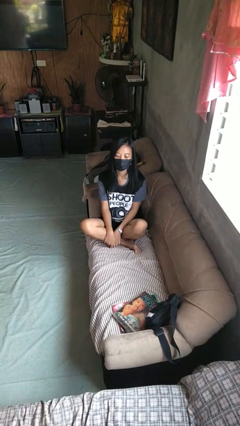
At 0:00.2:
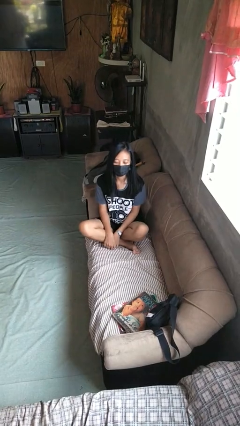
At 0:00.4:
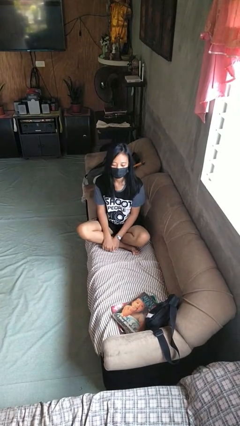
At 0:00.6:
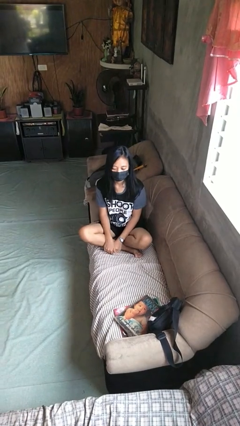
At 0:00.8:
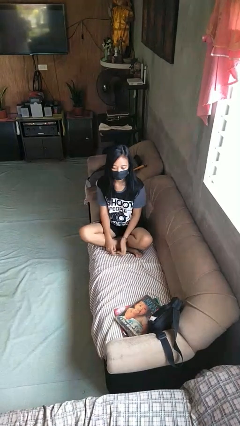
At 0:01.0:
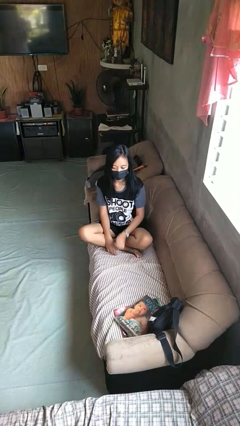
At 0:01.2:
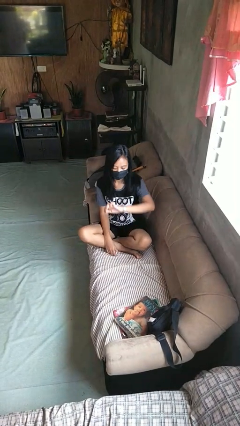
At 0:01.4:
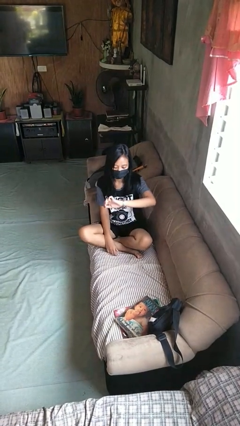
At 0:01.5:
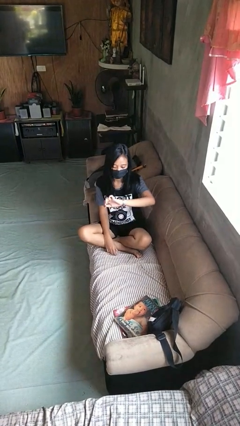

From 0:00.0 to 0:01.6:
person looks at wristwatch

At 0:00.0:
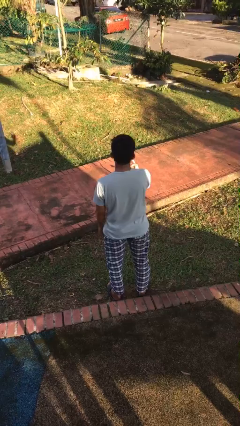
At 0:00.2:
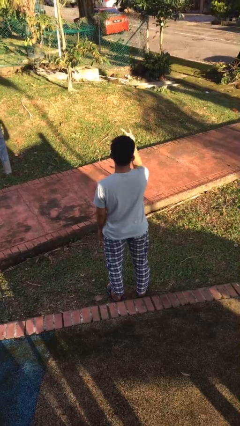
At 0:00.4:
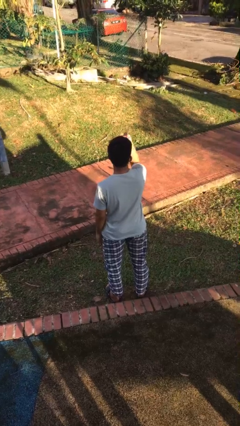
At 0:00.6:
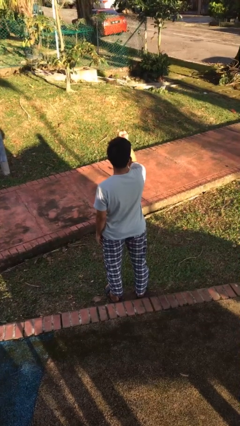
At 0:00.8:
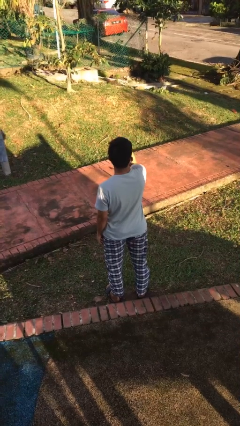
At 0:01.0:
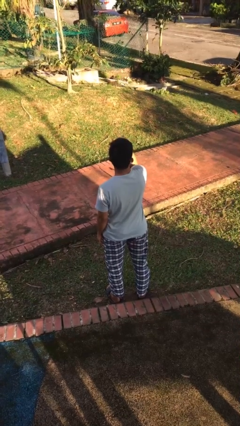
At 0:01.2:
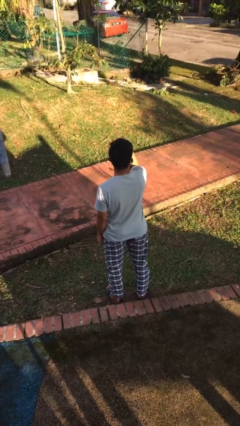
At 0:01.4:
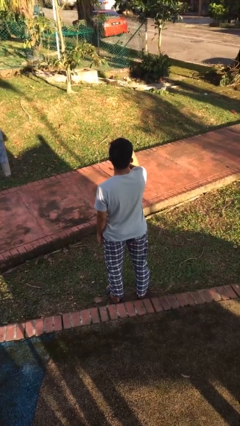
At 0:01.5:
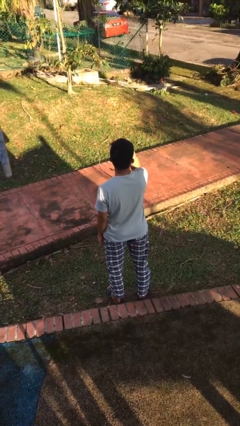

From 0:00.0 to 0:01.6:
person gestures watch closely

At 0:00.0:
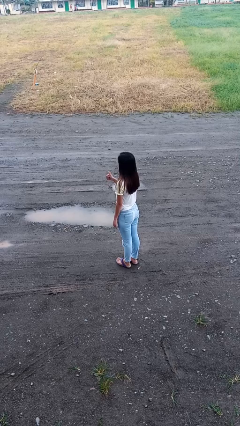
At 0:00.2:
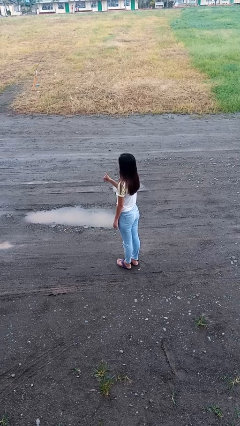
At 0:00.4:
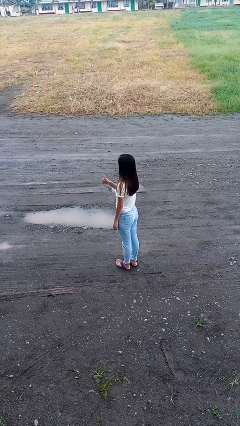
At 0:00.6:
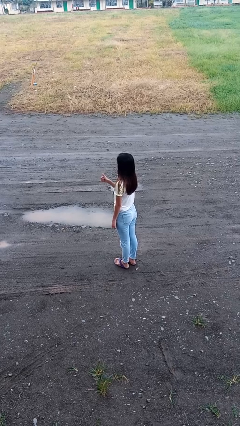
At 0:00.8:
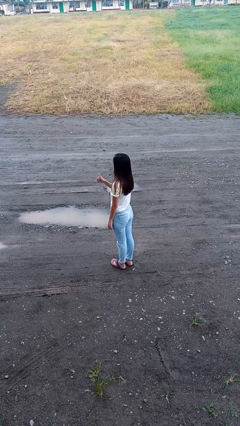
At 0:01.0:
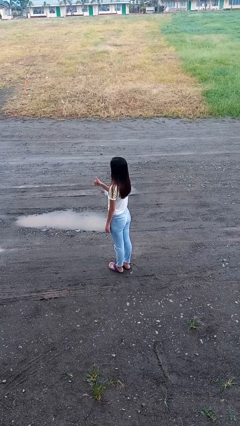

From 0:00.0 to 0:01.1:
person gestures thumbs up

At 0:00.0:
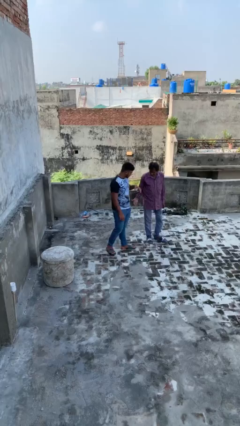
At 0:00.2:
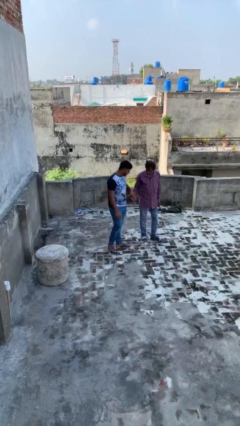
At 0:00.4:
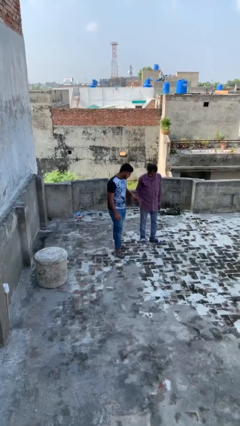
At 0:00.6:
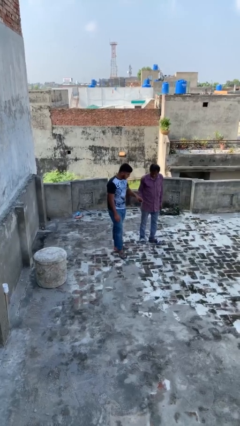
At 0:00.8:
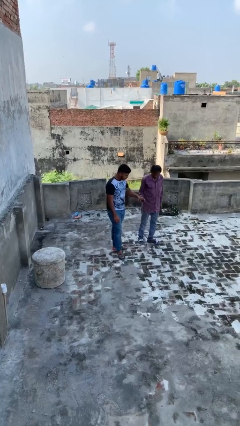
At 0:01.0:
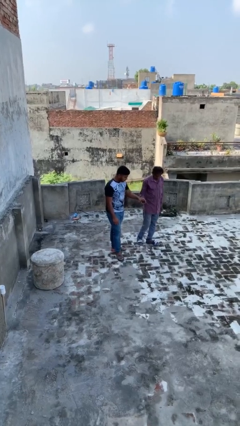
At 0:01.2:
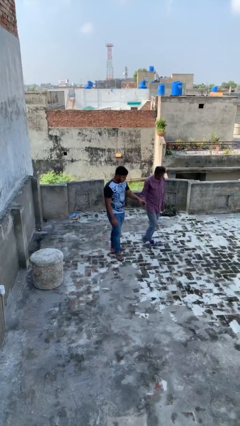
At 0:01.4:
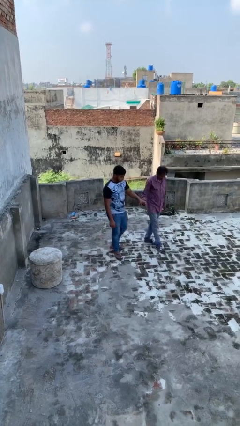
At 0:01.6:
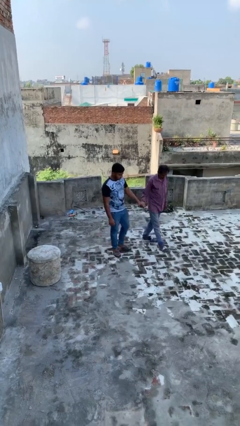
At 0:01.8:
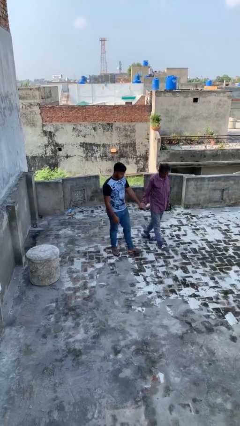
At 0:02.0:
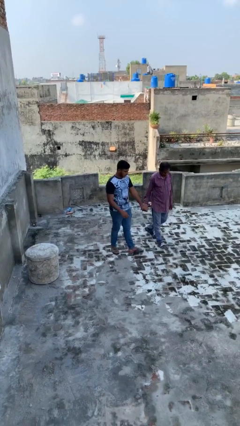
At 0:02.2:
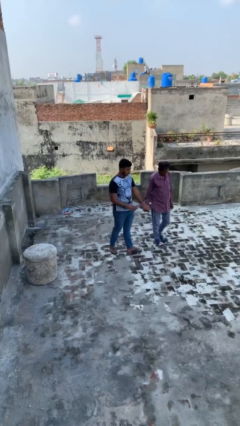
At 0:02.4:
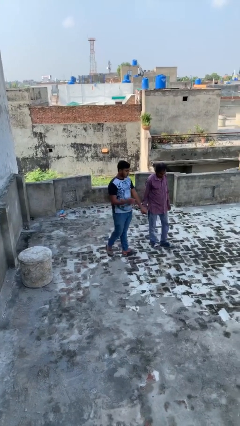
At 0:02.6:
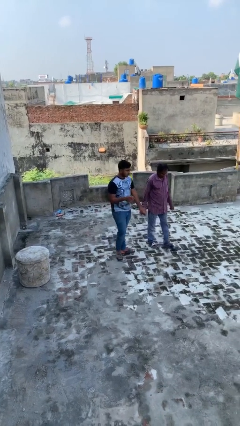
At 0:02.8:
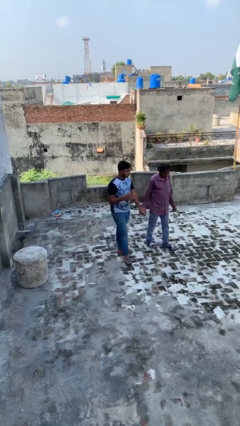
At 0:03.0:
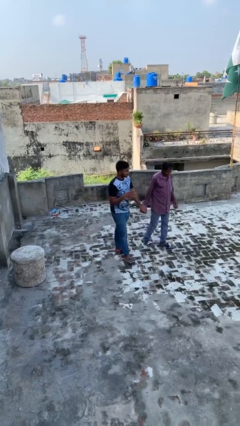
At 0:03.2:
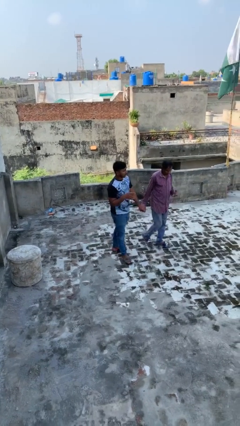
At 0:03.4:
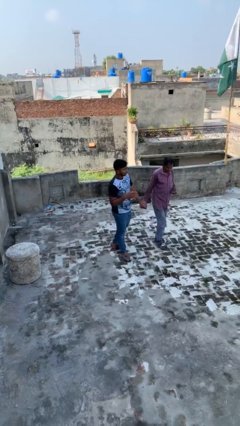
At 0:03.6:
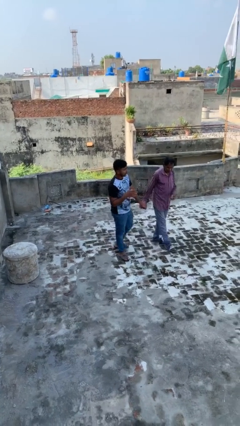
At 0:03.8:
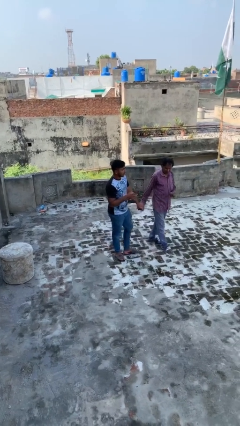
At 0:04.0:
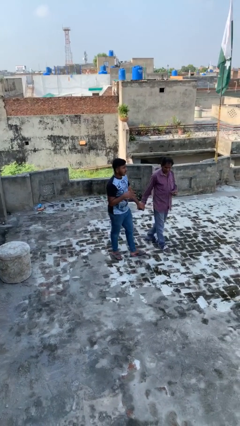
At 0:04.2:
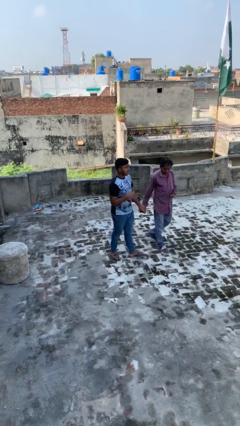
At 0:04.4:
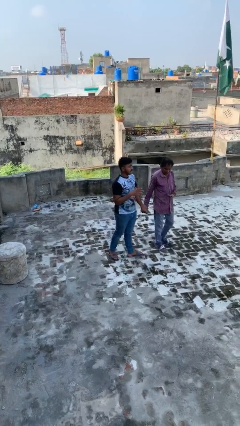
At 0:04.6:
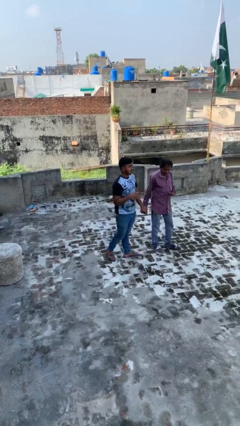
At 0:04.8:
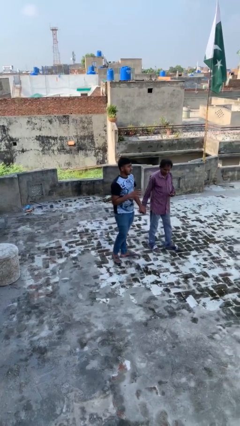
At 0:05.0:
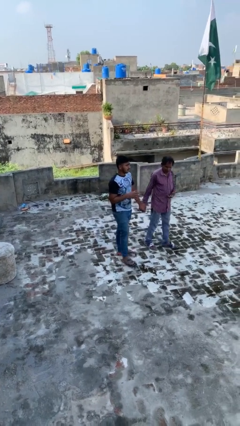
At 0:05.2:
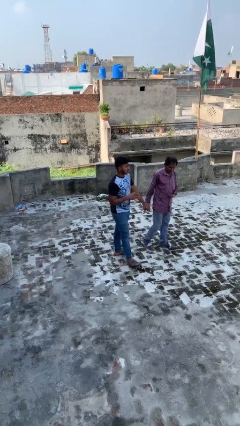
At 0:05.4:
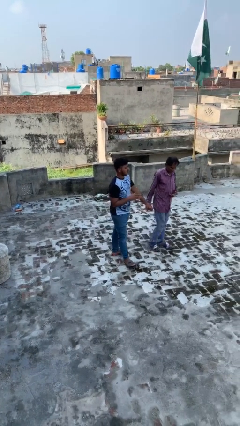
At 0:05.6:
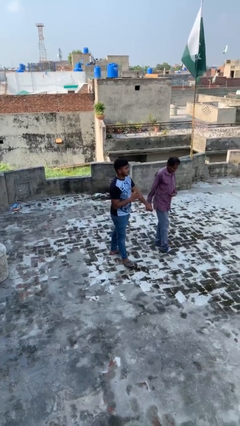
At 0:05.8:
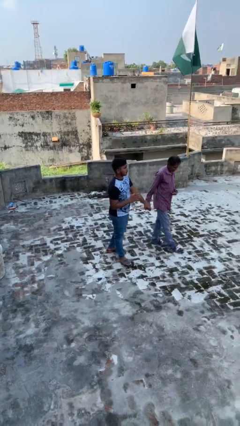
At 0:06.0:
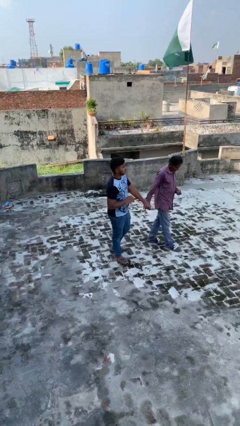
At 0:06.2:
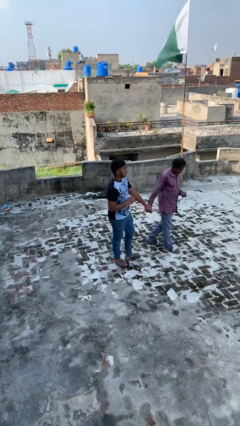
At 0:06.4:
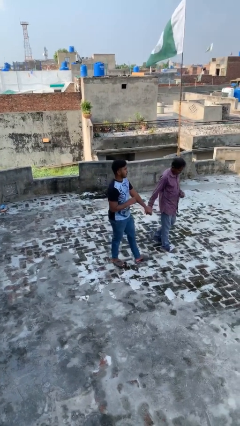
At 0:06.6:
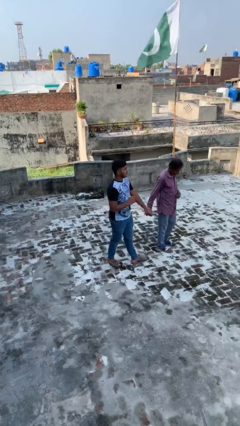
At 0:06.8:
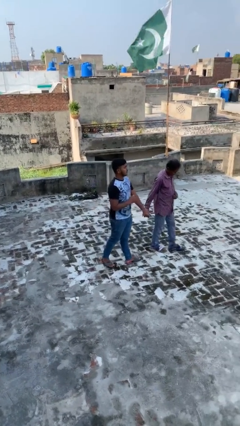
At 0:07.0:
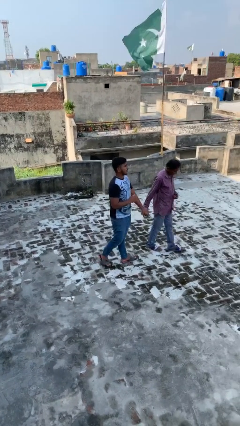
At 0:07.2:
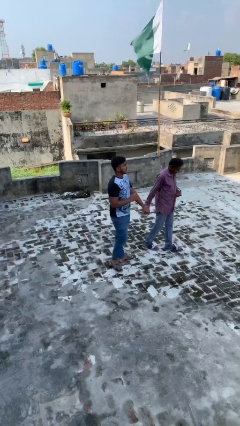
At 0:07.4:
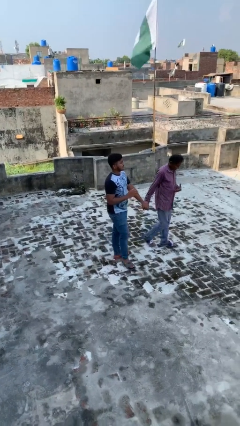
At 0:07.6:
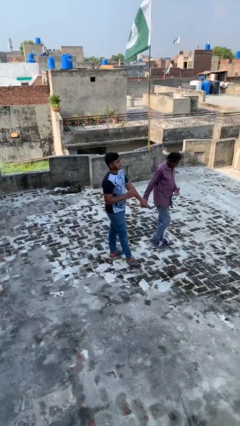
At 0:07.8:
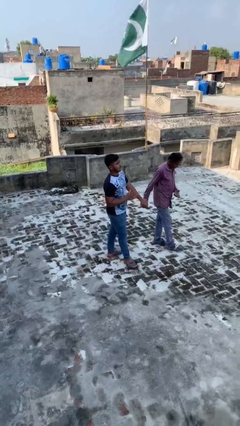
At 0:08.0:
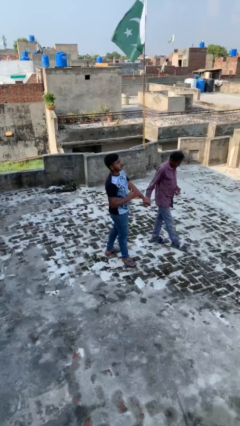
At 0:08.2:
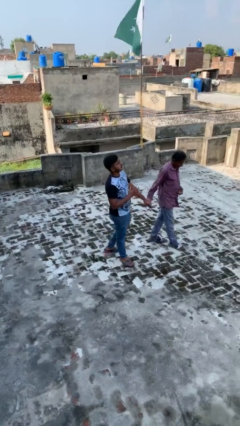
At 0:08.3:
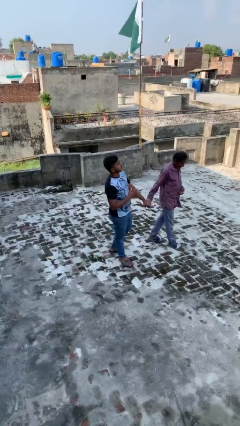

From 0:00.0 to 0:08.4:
person holds hand

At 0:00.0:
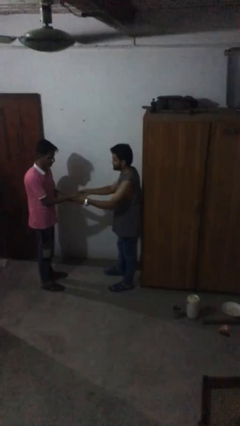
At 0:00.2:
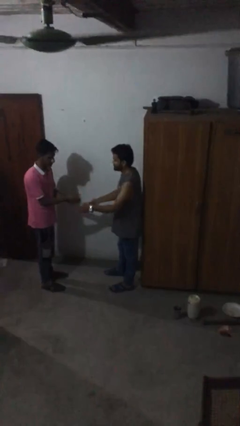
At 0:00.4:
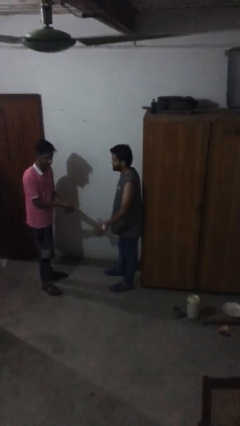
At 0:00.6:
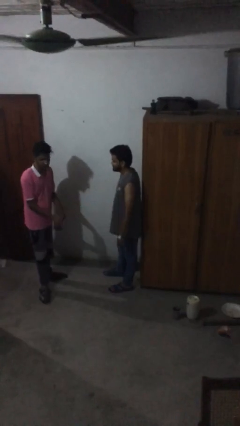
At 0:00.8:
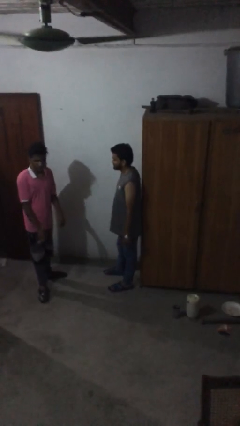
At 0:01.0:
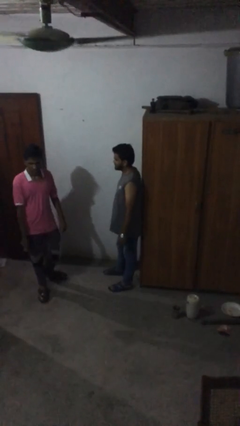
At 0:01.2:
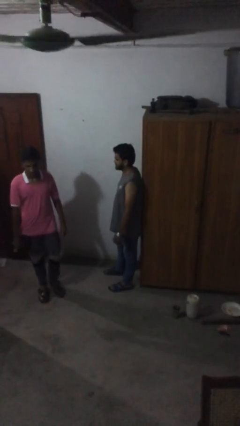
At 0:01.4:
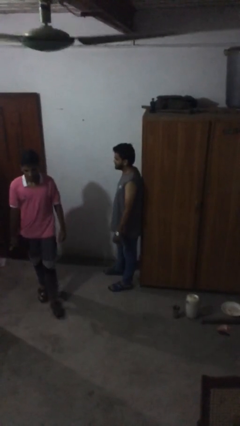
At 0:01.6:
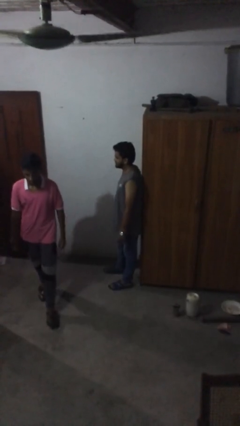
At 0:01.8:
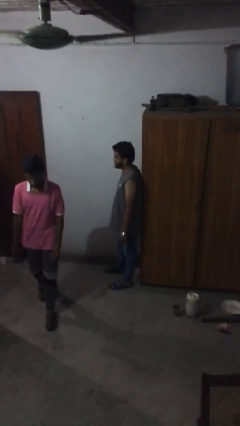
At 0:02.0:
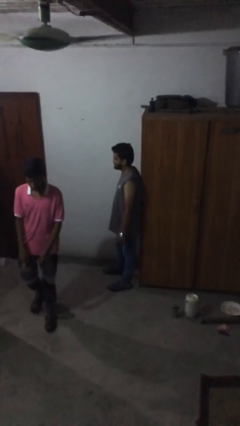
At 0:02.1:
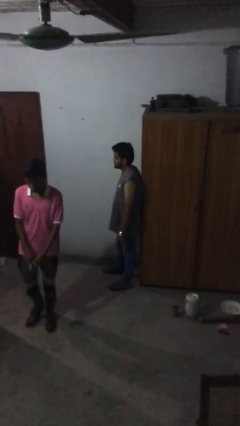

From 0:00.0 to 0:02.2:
person transfers object to person

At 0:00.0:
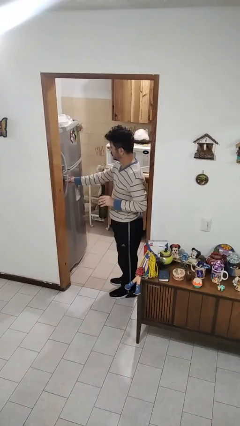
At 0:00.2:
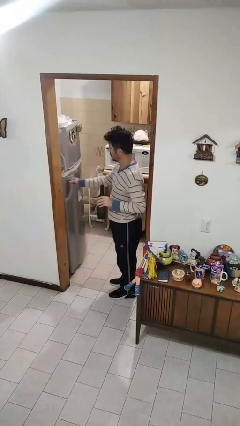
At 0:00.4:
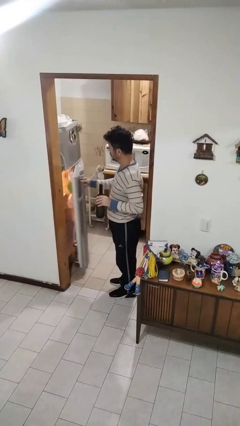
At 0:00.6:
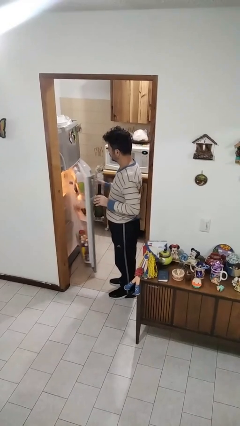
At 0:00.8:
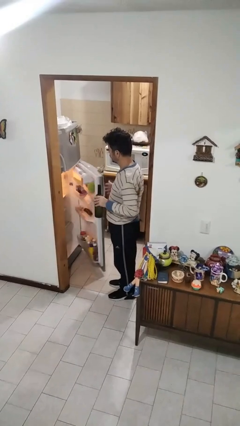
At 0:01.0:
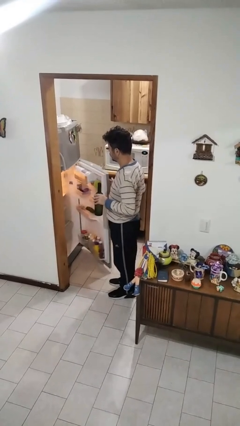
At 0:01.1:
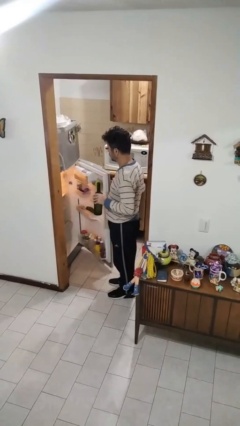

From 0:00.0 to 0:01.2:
person opens refrigerator

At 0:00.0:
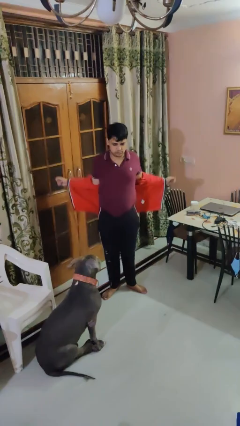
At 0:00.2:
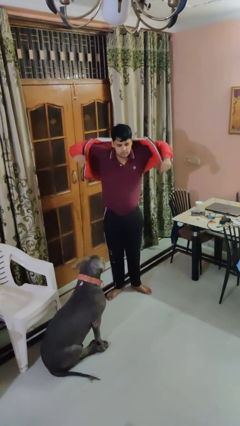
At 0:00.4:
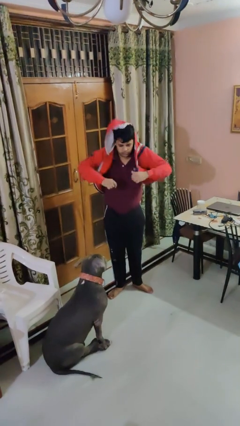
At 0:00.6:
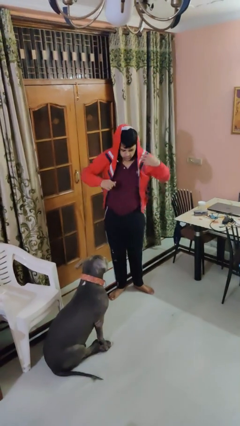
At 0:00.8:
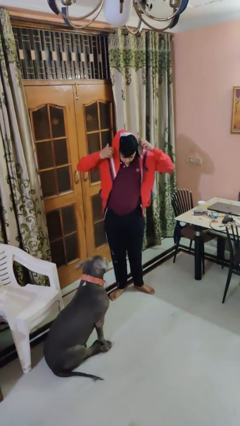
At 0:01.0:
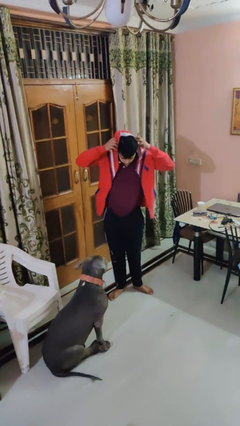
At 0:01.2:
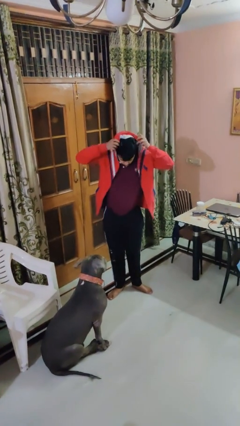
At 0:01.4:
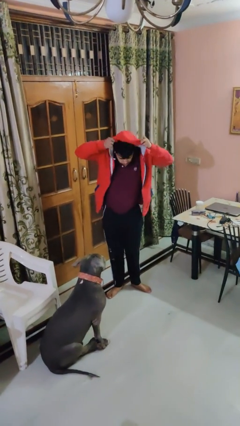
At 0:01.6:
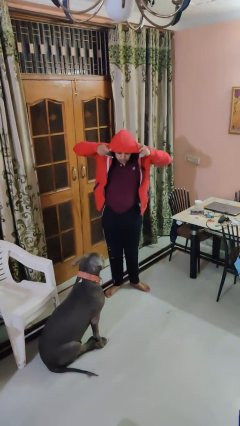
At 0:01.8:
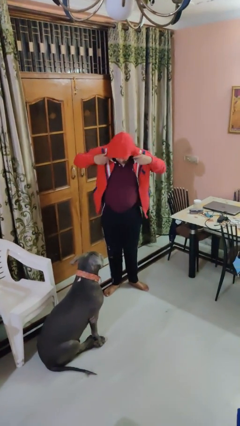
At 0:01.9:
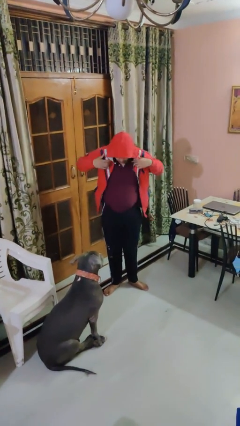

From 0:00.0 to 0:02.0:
person puts on hoodie
